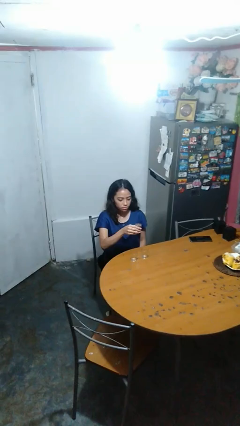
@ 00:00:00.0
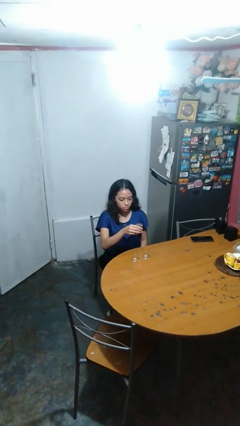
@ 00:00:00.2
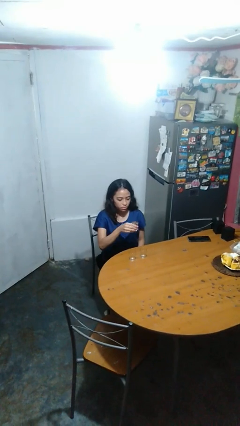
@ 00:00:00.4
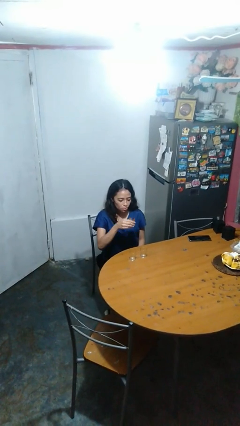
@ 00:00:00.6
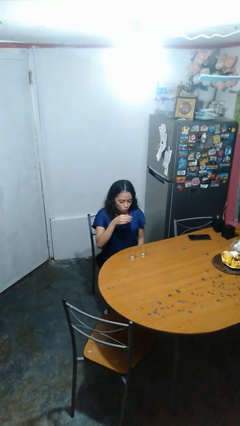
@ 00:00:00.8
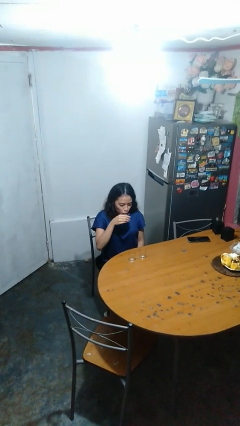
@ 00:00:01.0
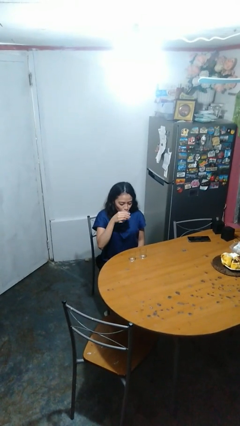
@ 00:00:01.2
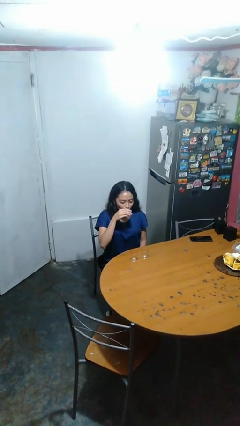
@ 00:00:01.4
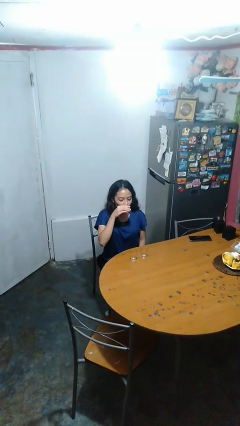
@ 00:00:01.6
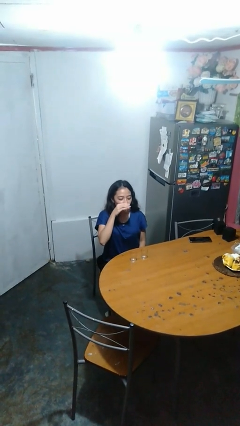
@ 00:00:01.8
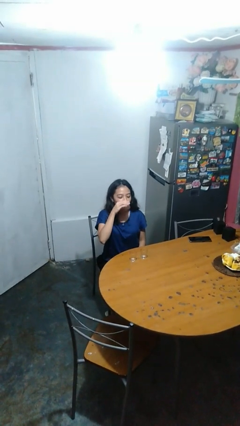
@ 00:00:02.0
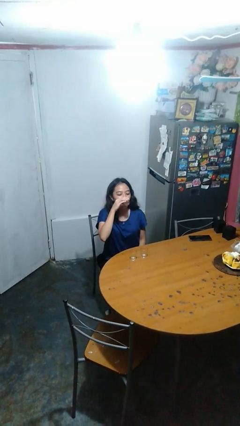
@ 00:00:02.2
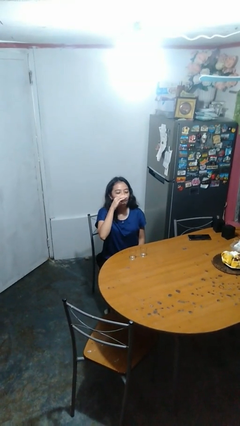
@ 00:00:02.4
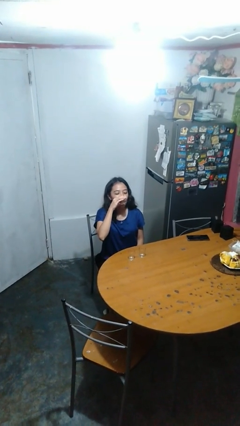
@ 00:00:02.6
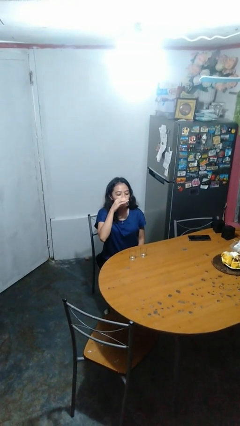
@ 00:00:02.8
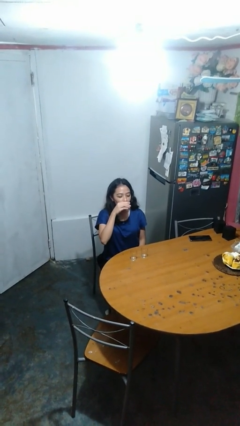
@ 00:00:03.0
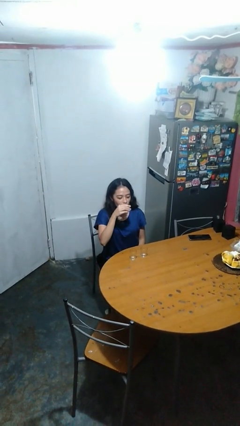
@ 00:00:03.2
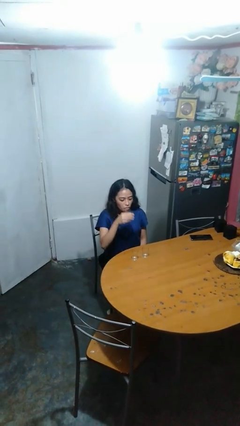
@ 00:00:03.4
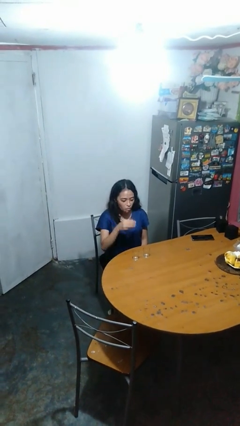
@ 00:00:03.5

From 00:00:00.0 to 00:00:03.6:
person drinks from shotglass

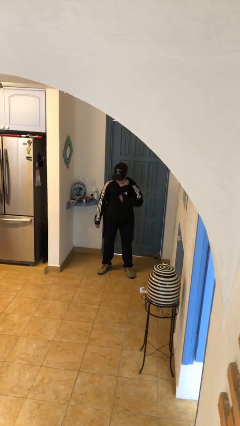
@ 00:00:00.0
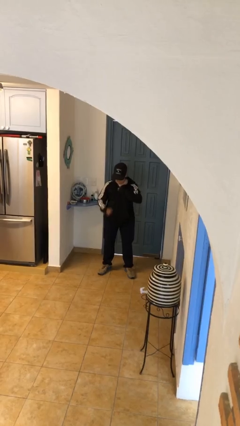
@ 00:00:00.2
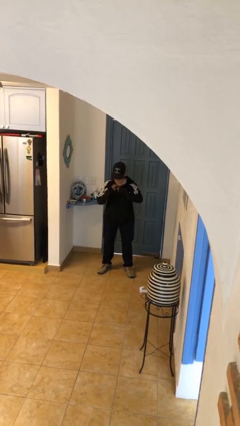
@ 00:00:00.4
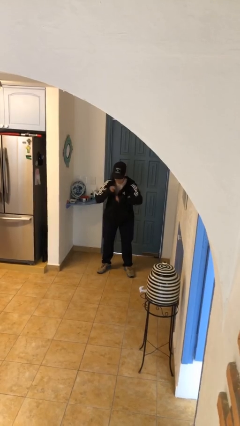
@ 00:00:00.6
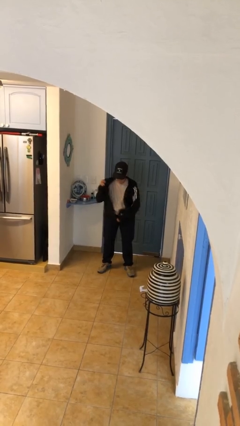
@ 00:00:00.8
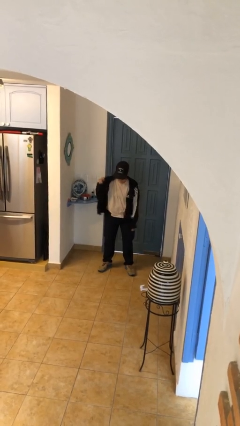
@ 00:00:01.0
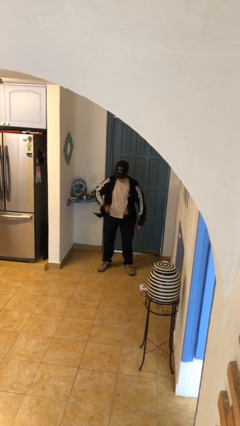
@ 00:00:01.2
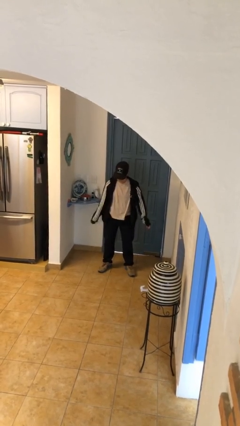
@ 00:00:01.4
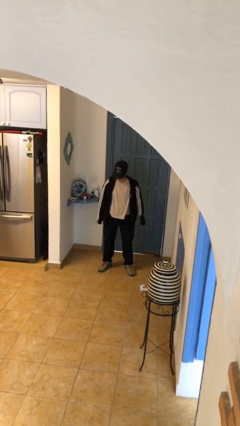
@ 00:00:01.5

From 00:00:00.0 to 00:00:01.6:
person unzips jacket

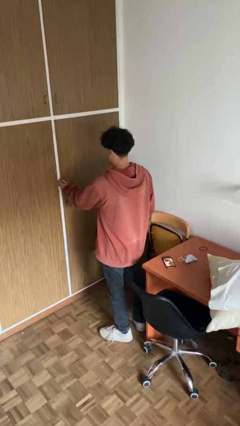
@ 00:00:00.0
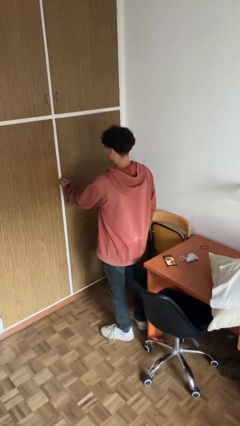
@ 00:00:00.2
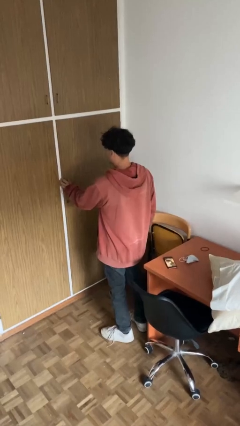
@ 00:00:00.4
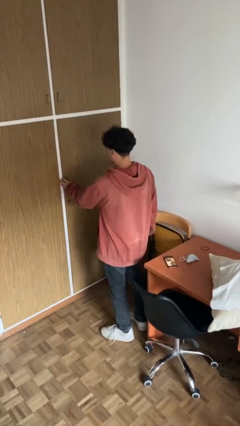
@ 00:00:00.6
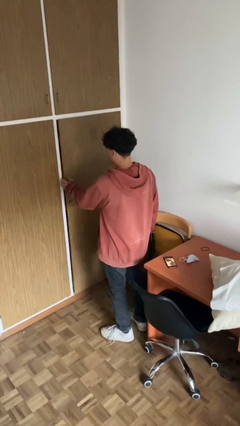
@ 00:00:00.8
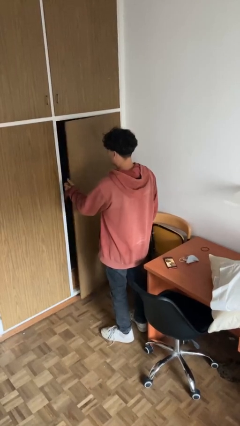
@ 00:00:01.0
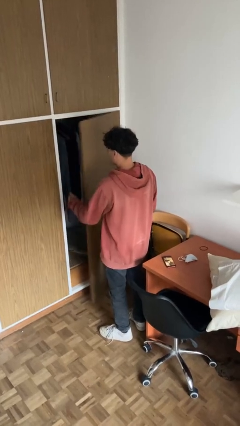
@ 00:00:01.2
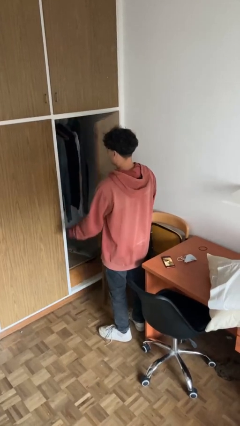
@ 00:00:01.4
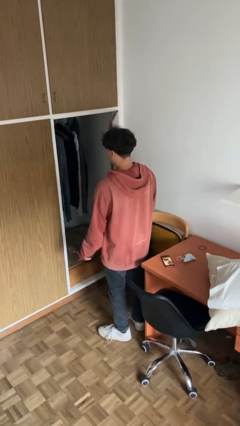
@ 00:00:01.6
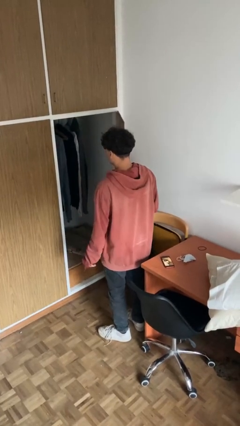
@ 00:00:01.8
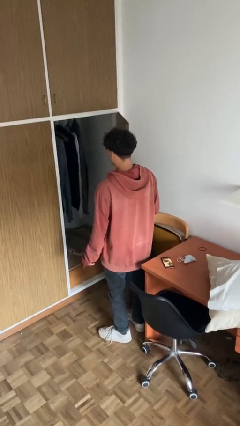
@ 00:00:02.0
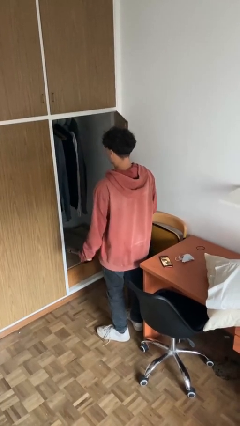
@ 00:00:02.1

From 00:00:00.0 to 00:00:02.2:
person opens closet door

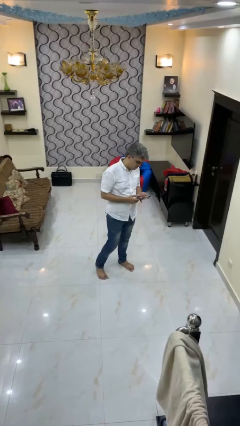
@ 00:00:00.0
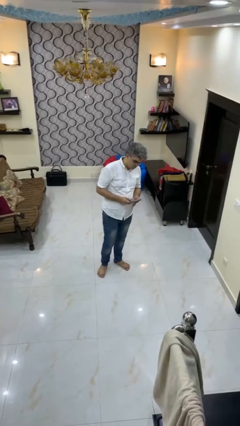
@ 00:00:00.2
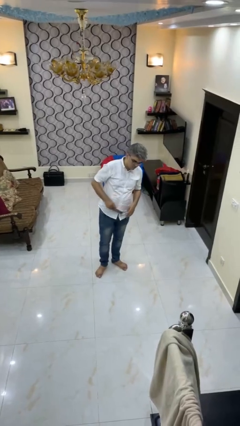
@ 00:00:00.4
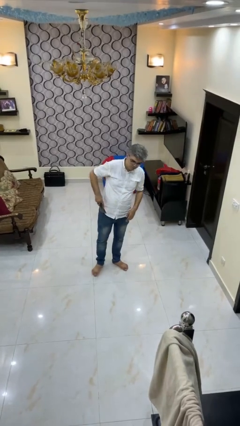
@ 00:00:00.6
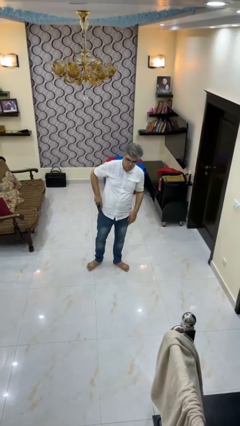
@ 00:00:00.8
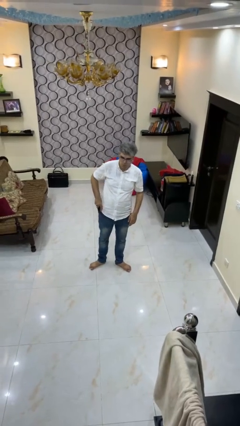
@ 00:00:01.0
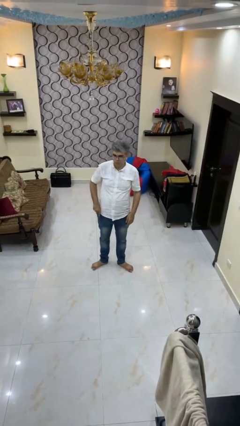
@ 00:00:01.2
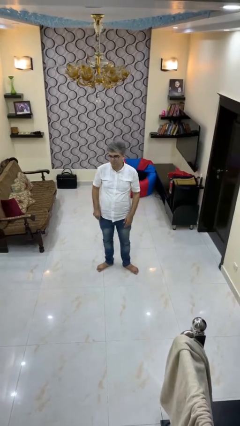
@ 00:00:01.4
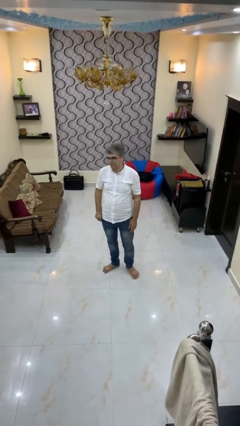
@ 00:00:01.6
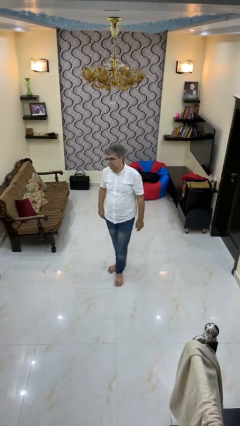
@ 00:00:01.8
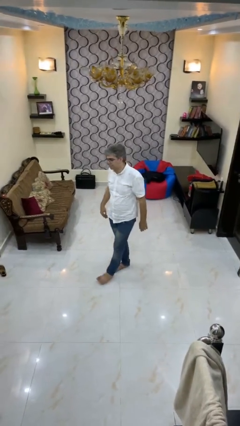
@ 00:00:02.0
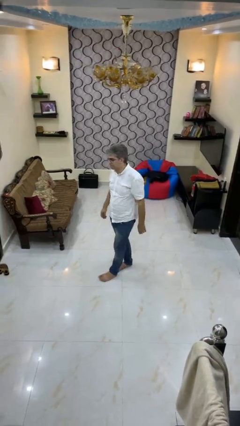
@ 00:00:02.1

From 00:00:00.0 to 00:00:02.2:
person puts phone into pocket

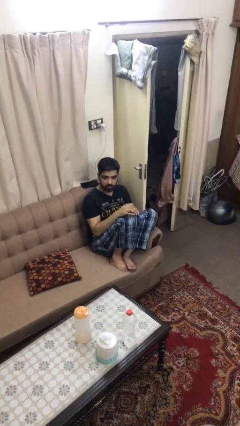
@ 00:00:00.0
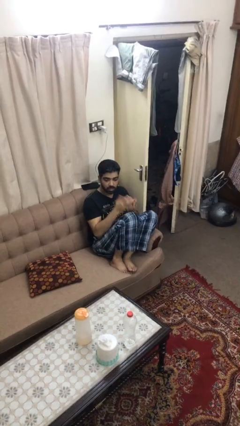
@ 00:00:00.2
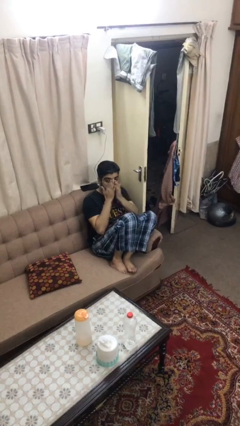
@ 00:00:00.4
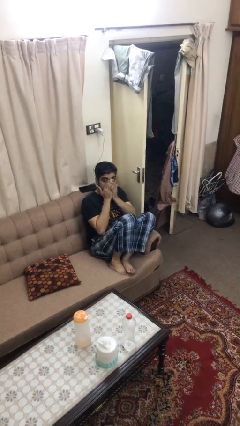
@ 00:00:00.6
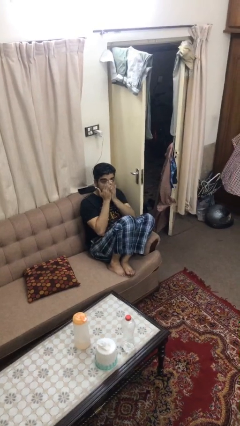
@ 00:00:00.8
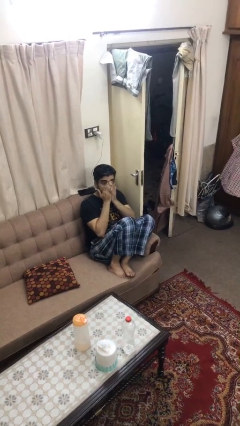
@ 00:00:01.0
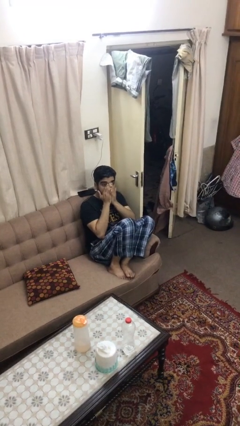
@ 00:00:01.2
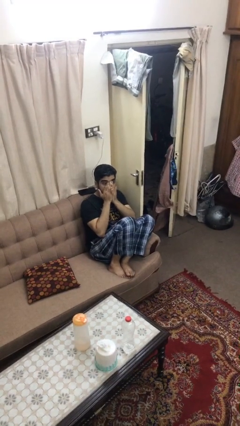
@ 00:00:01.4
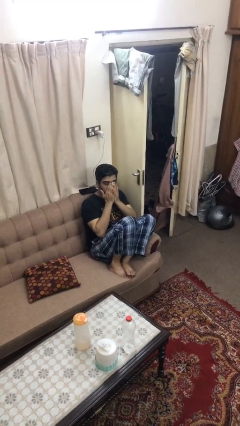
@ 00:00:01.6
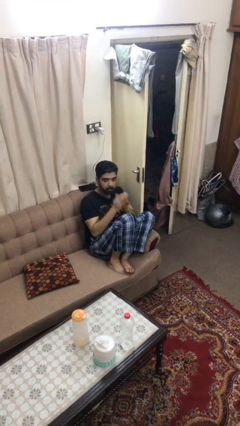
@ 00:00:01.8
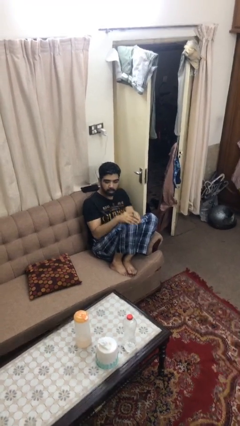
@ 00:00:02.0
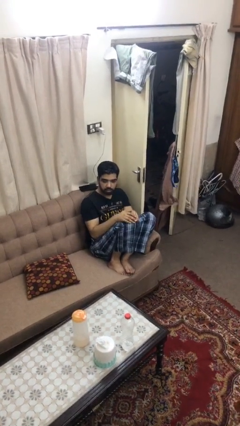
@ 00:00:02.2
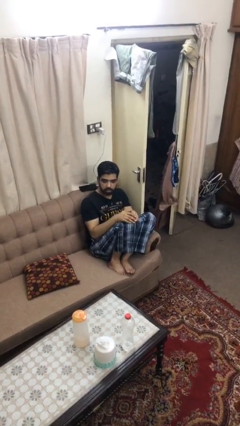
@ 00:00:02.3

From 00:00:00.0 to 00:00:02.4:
person covers face with hands

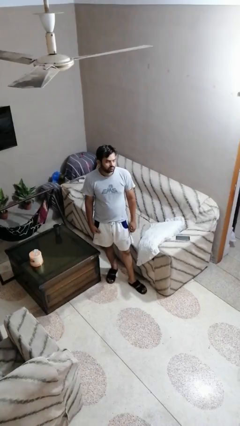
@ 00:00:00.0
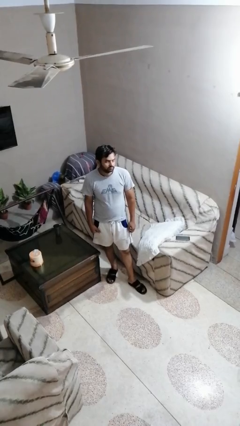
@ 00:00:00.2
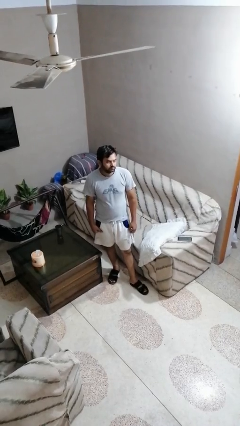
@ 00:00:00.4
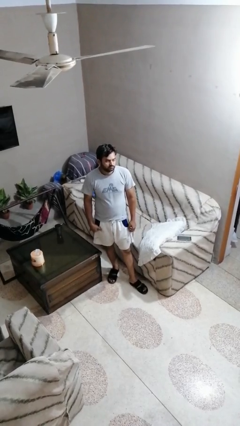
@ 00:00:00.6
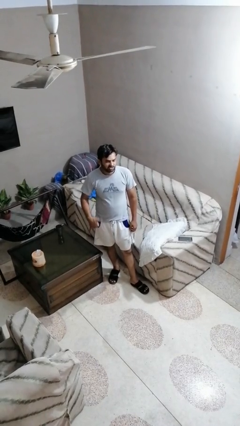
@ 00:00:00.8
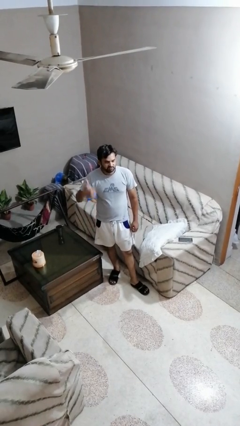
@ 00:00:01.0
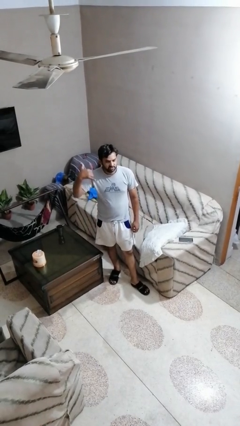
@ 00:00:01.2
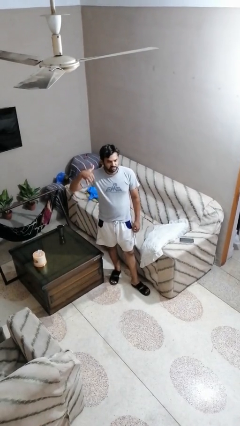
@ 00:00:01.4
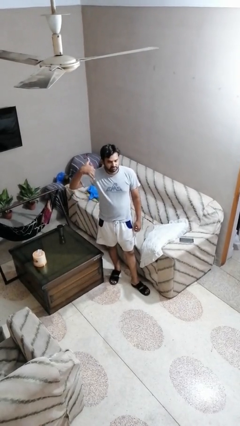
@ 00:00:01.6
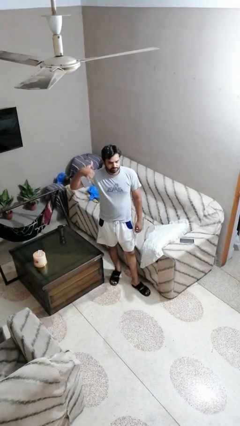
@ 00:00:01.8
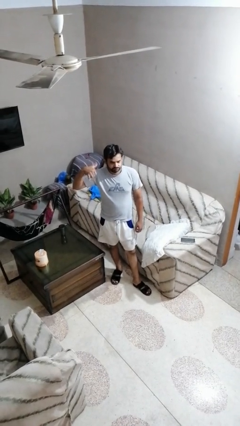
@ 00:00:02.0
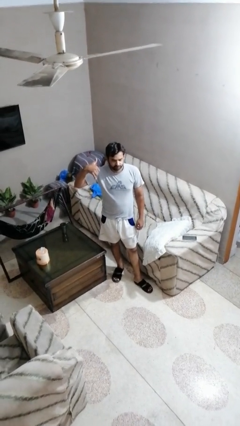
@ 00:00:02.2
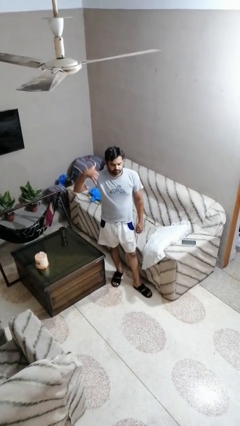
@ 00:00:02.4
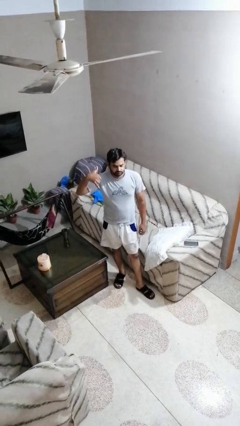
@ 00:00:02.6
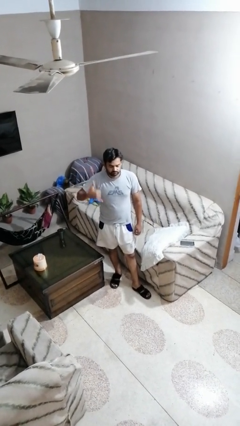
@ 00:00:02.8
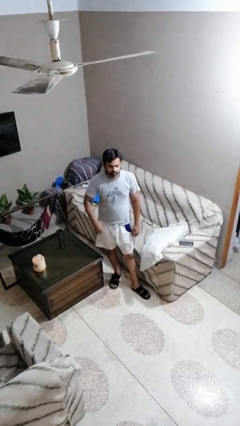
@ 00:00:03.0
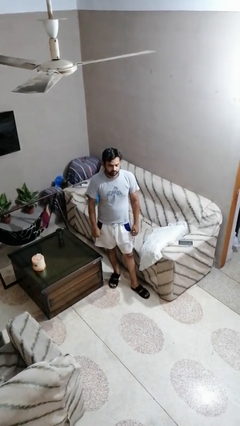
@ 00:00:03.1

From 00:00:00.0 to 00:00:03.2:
person gestures hang loose

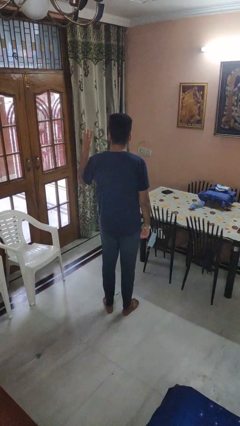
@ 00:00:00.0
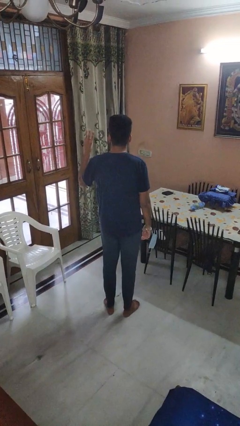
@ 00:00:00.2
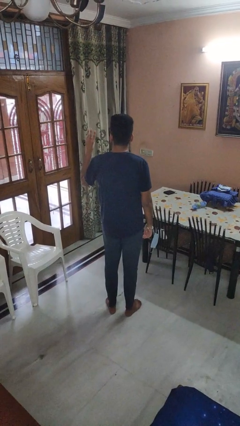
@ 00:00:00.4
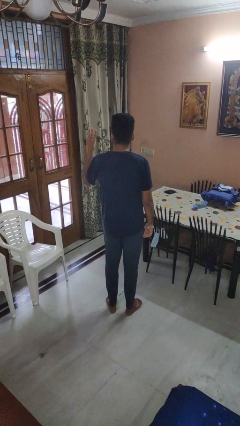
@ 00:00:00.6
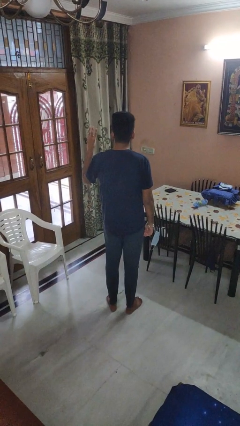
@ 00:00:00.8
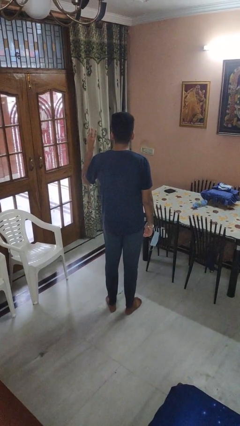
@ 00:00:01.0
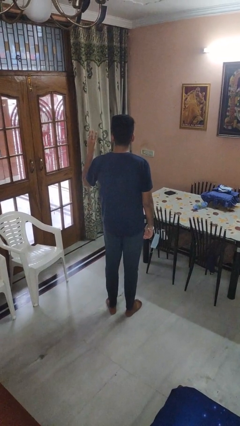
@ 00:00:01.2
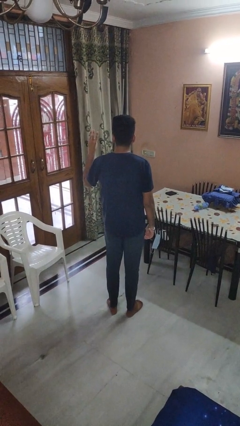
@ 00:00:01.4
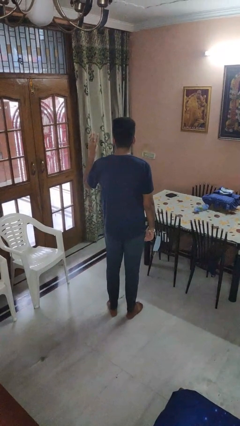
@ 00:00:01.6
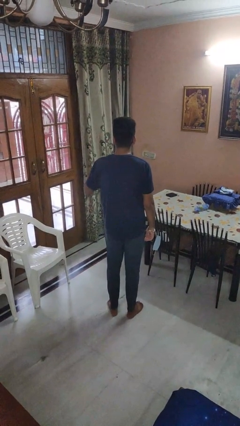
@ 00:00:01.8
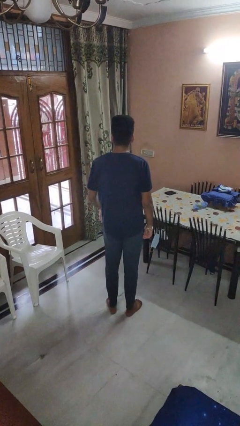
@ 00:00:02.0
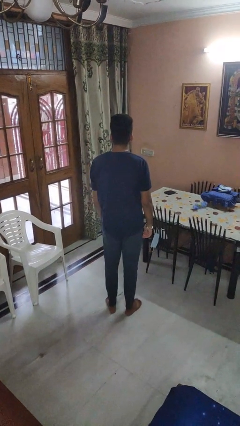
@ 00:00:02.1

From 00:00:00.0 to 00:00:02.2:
person gestures number three
